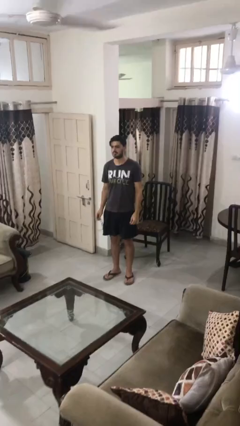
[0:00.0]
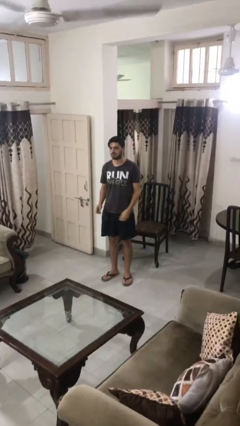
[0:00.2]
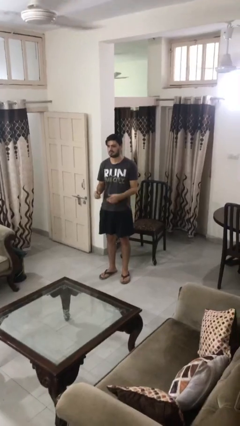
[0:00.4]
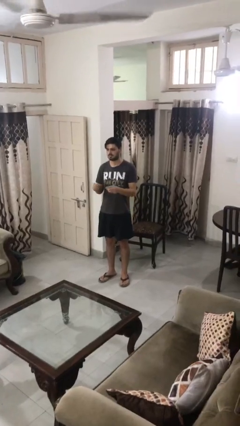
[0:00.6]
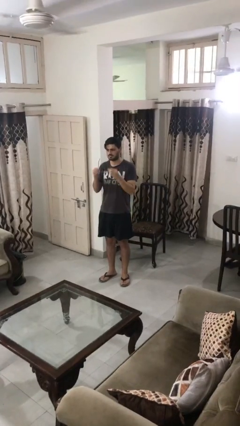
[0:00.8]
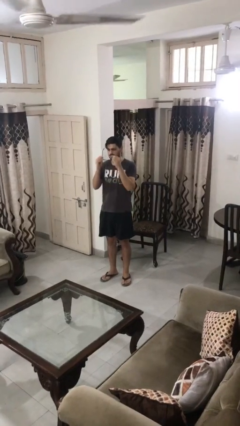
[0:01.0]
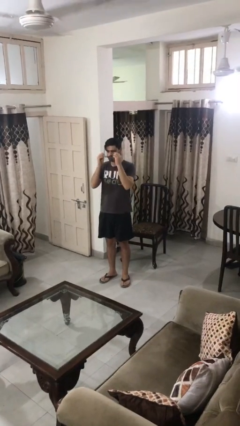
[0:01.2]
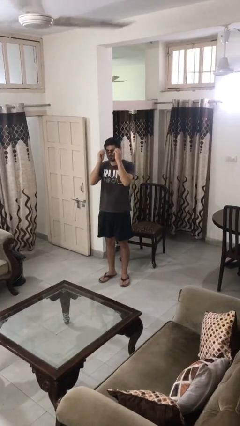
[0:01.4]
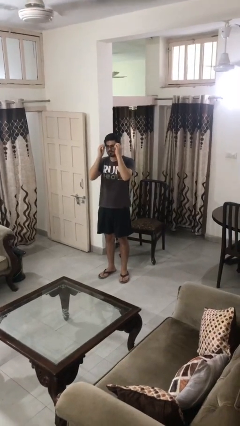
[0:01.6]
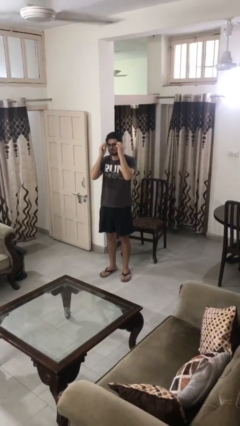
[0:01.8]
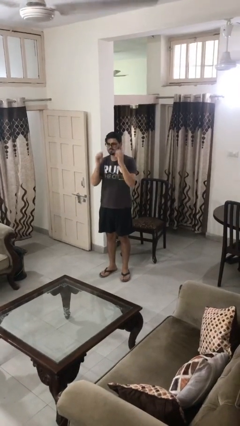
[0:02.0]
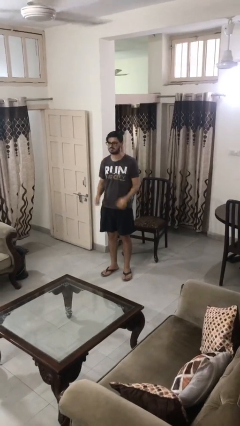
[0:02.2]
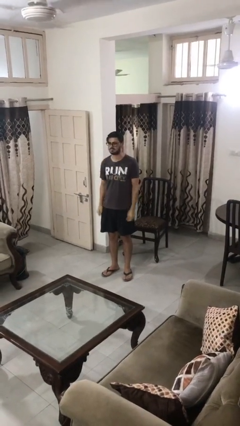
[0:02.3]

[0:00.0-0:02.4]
person puts on glasses

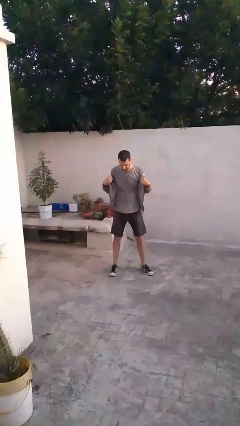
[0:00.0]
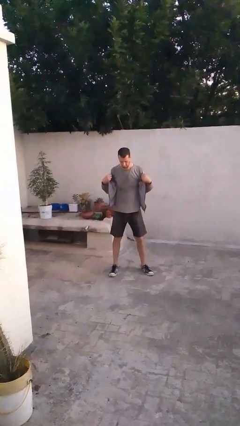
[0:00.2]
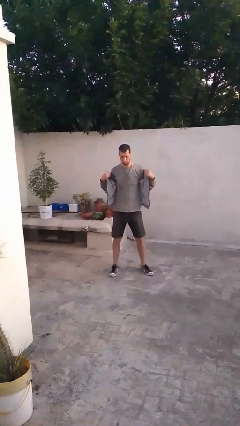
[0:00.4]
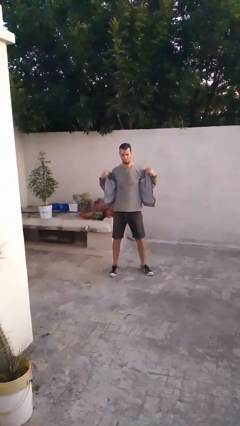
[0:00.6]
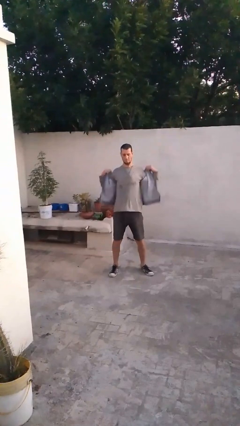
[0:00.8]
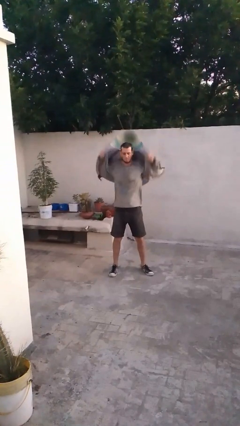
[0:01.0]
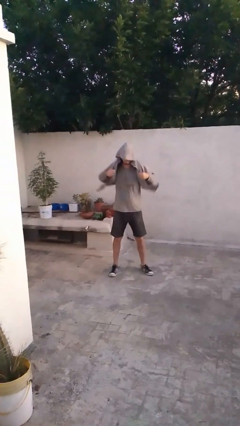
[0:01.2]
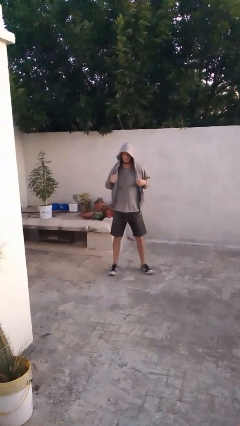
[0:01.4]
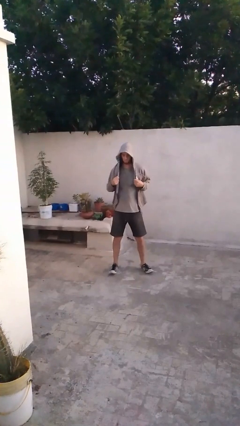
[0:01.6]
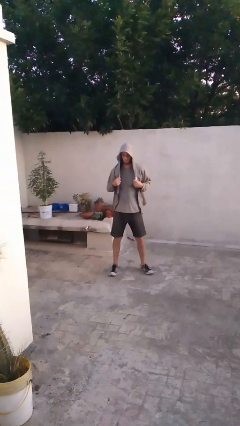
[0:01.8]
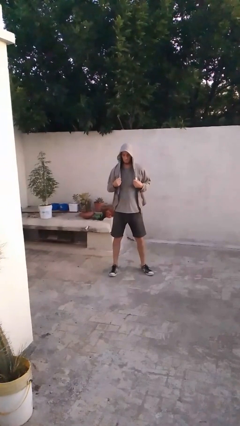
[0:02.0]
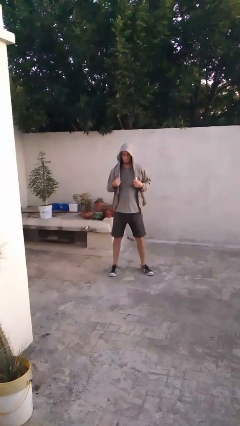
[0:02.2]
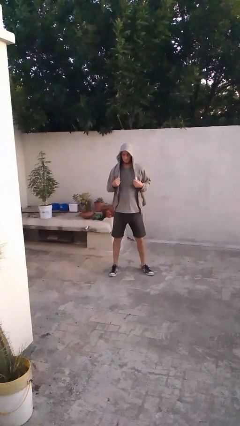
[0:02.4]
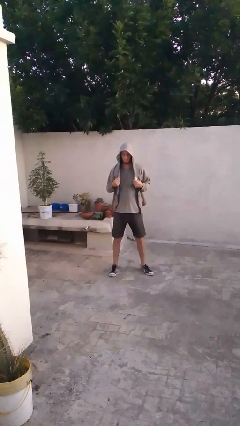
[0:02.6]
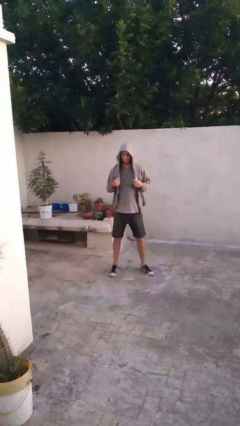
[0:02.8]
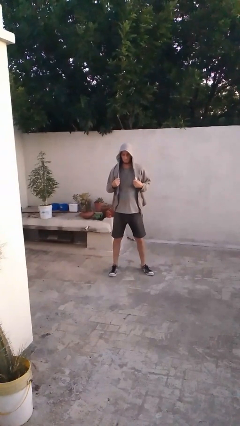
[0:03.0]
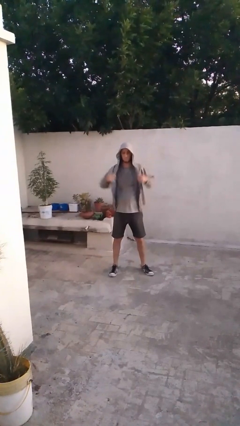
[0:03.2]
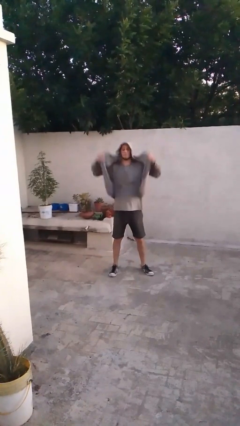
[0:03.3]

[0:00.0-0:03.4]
person puts on hoodie

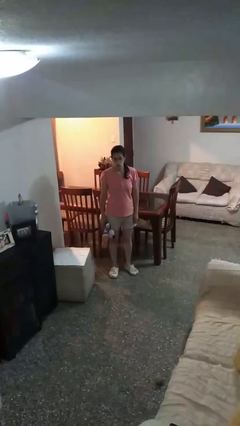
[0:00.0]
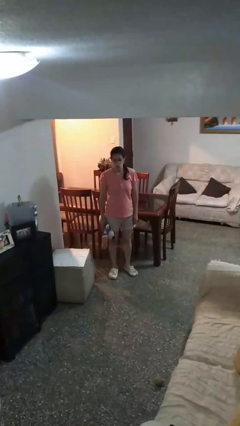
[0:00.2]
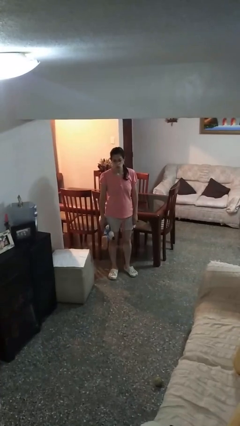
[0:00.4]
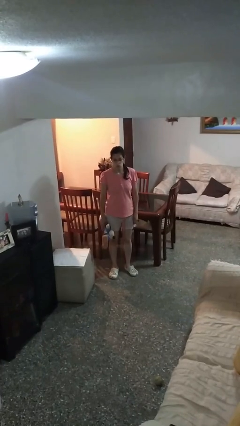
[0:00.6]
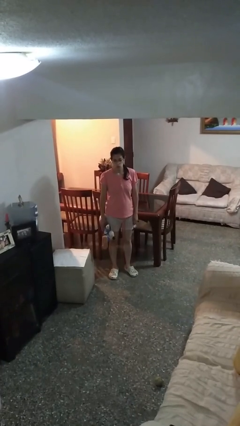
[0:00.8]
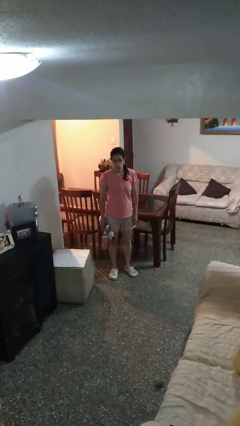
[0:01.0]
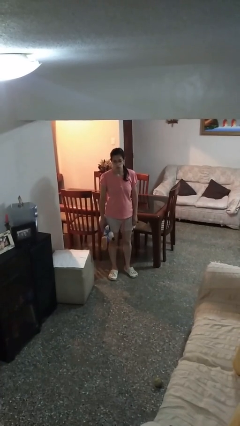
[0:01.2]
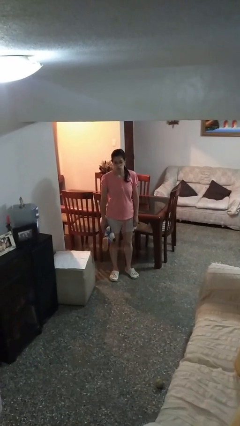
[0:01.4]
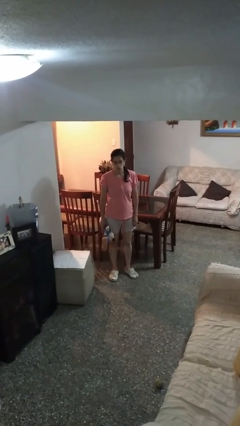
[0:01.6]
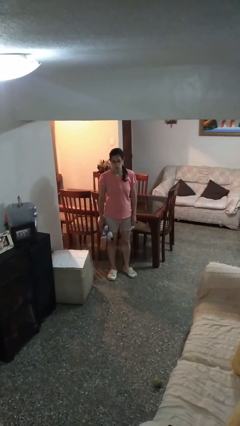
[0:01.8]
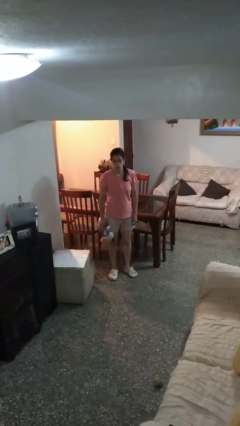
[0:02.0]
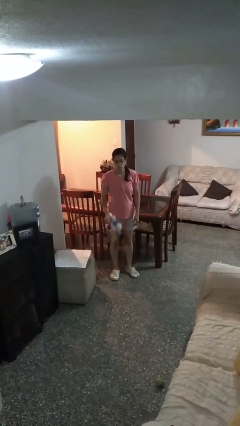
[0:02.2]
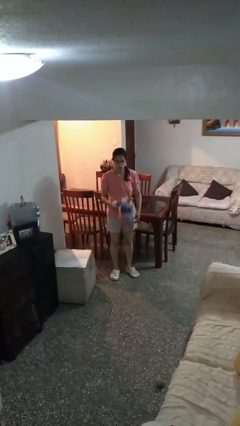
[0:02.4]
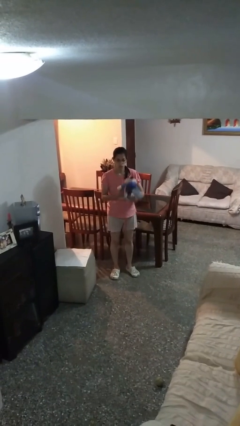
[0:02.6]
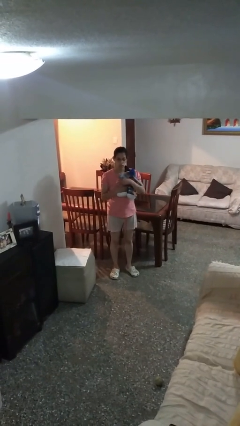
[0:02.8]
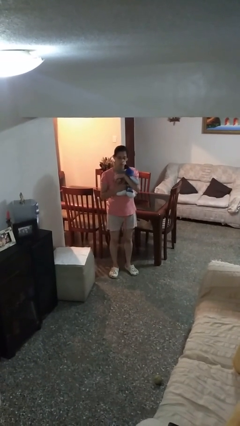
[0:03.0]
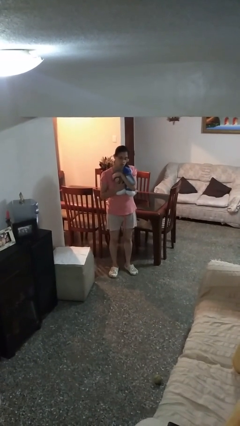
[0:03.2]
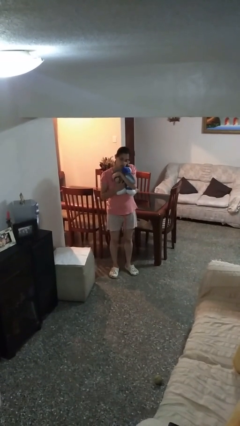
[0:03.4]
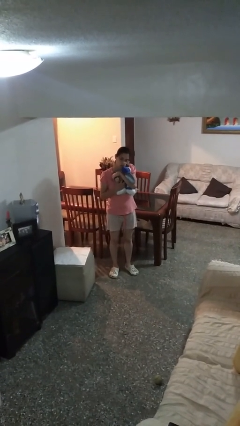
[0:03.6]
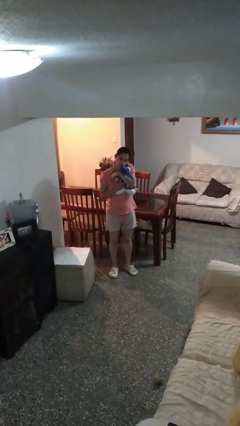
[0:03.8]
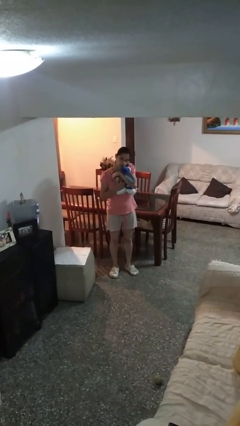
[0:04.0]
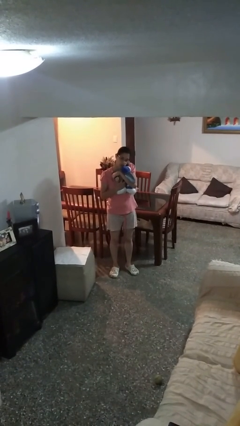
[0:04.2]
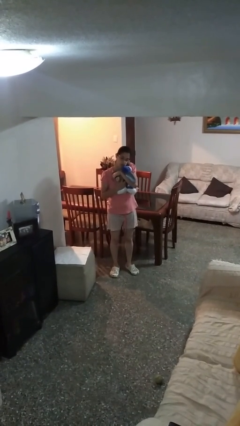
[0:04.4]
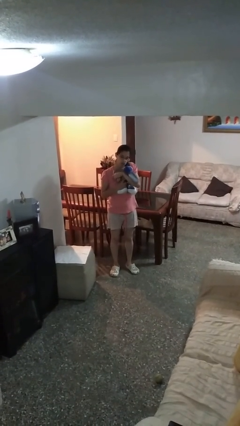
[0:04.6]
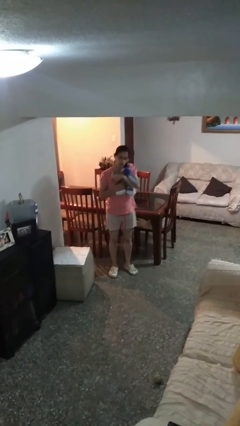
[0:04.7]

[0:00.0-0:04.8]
person hugs stuffed animal

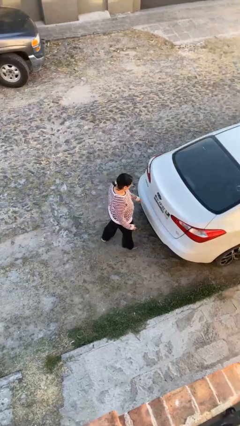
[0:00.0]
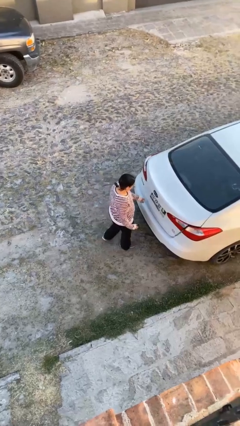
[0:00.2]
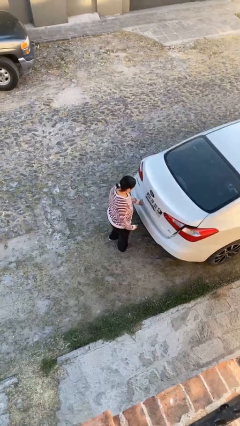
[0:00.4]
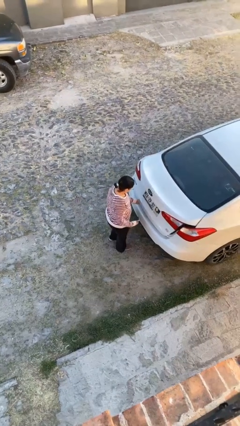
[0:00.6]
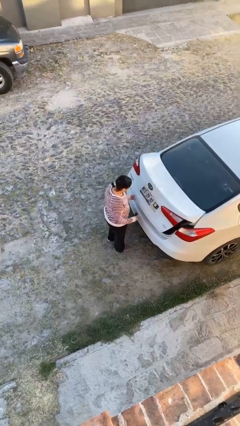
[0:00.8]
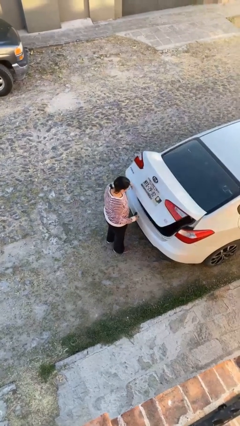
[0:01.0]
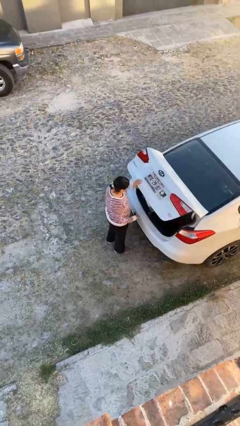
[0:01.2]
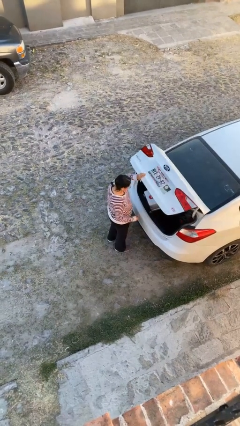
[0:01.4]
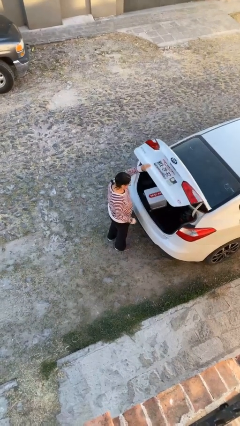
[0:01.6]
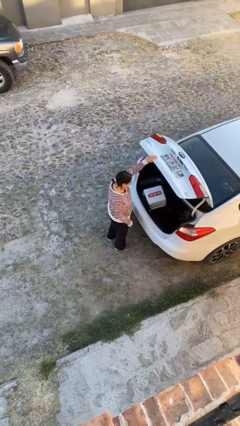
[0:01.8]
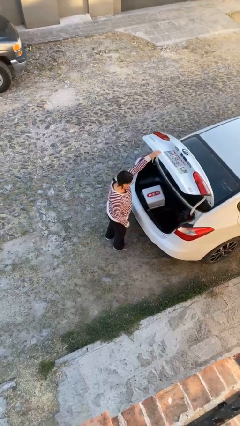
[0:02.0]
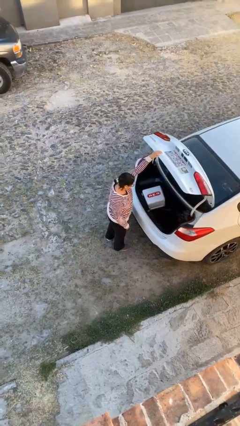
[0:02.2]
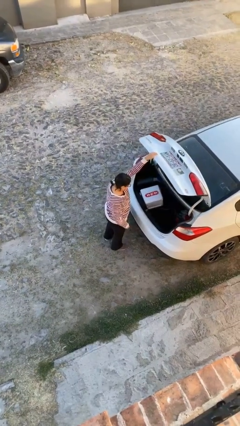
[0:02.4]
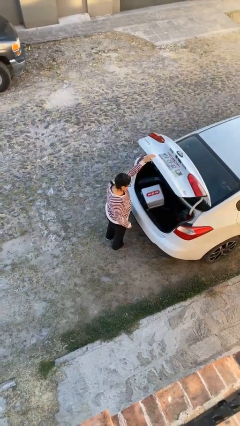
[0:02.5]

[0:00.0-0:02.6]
person opens car trunk

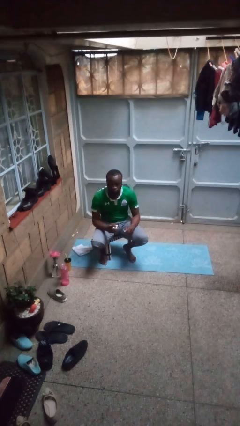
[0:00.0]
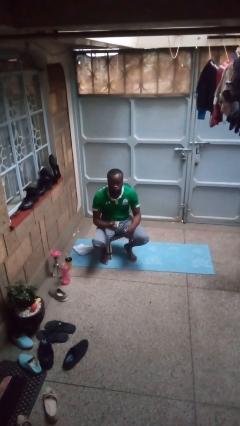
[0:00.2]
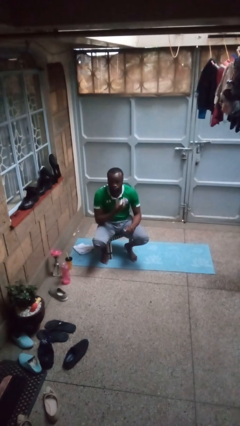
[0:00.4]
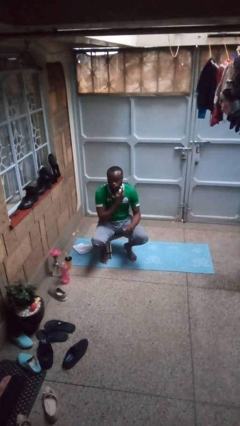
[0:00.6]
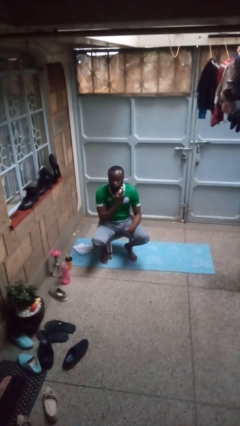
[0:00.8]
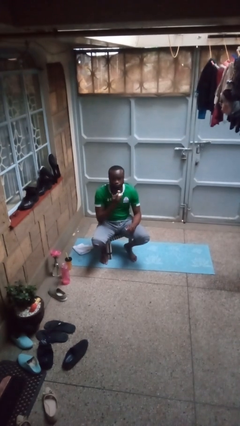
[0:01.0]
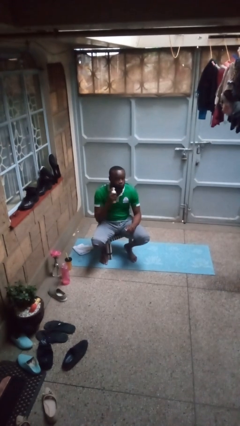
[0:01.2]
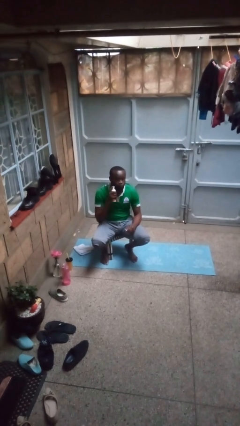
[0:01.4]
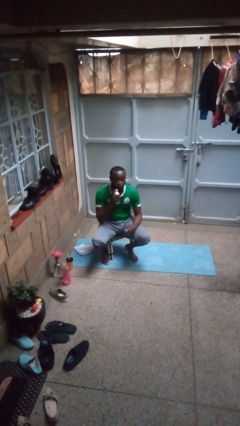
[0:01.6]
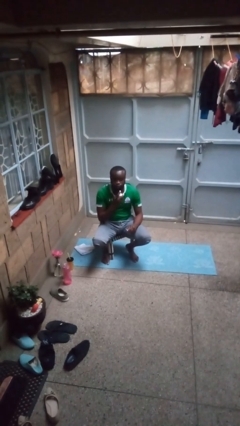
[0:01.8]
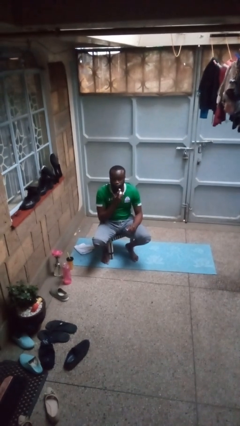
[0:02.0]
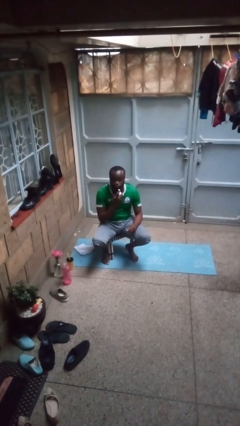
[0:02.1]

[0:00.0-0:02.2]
person applies shaving cream

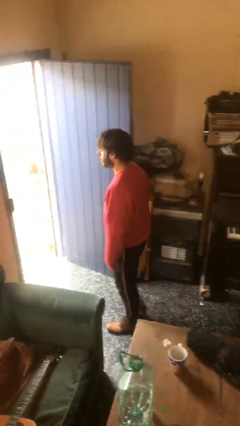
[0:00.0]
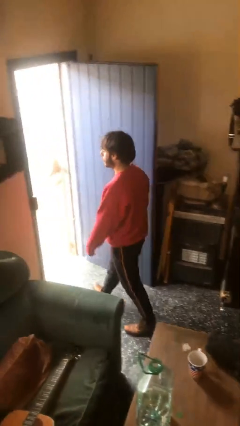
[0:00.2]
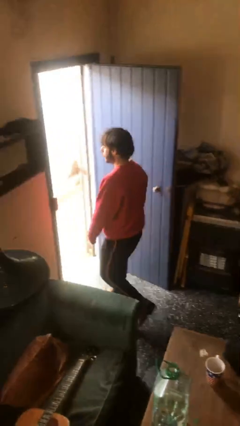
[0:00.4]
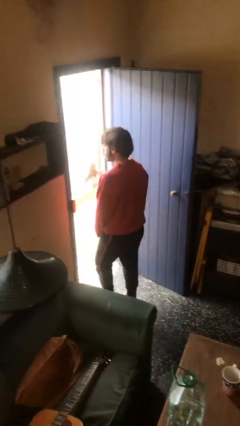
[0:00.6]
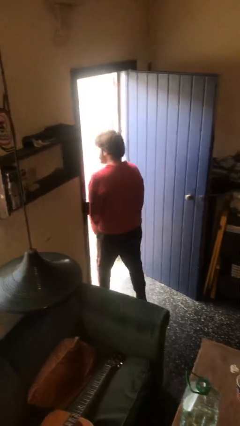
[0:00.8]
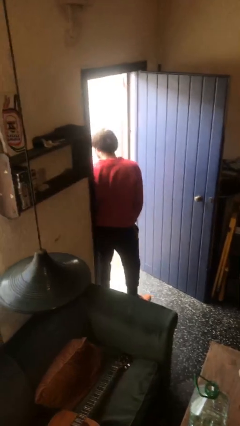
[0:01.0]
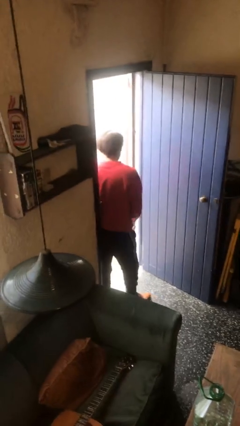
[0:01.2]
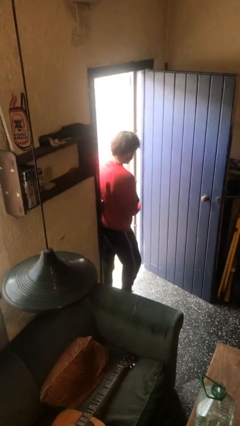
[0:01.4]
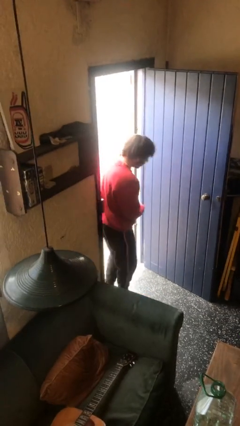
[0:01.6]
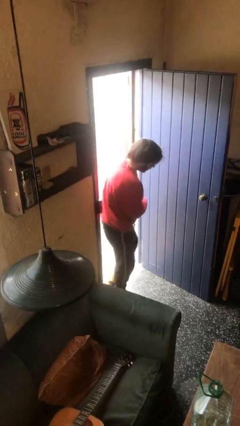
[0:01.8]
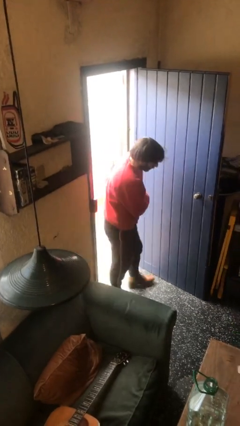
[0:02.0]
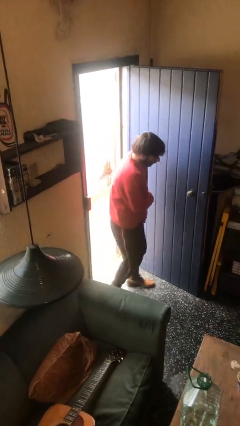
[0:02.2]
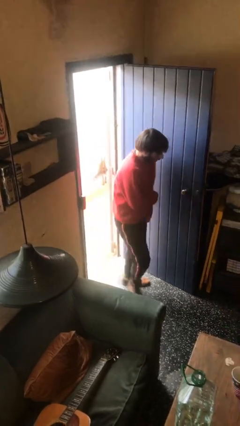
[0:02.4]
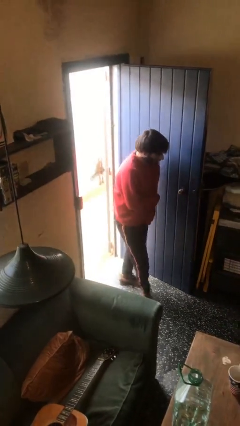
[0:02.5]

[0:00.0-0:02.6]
person bumps into wall
